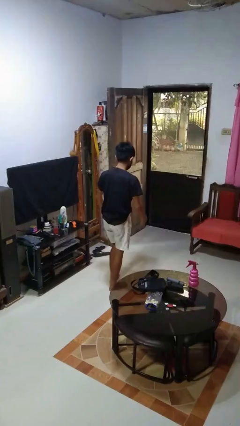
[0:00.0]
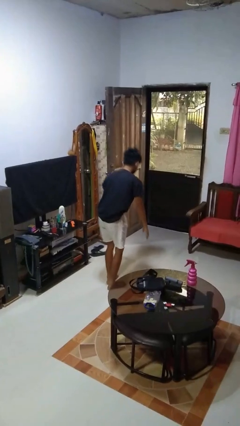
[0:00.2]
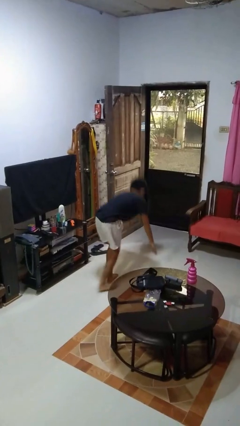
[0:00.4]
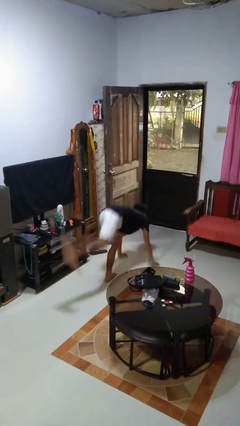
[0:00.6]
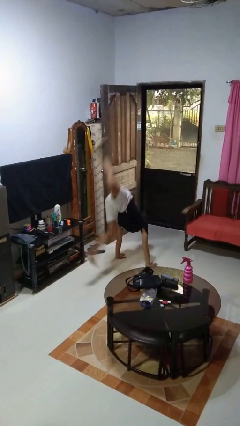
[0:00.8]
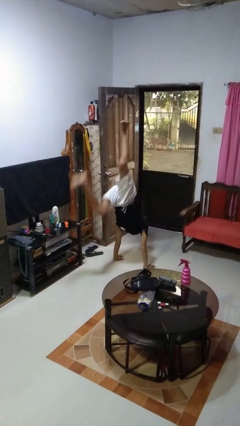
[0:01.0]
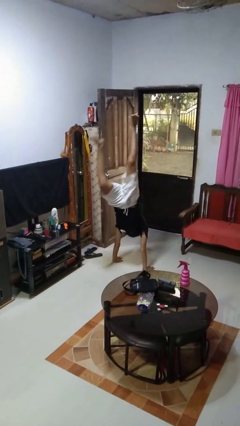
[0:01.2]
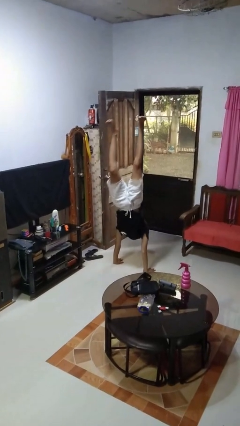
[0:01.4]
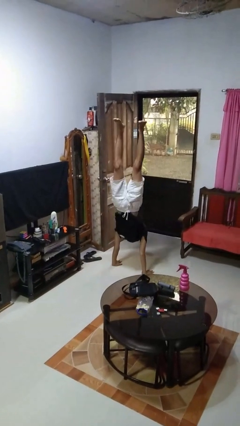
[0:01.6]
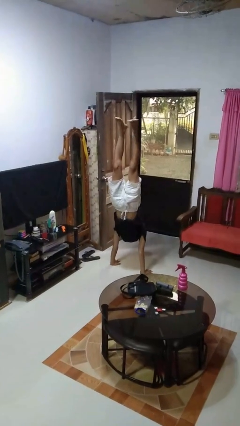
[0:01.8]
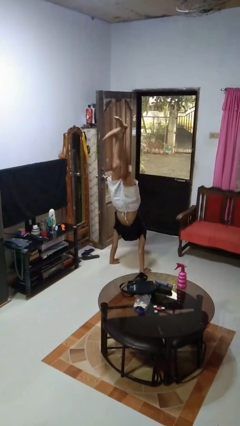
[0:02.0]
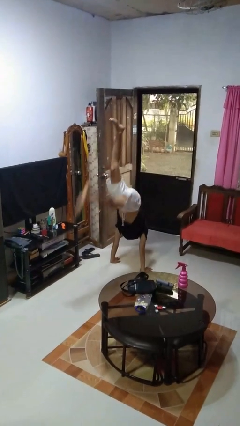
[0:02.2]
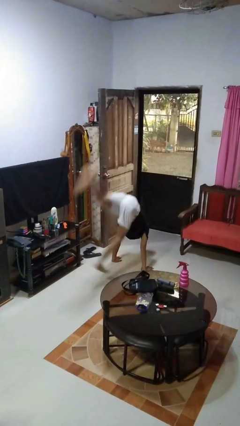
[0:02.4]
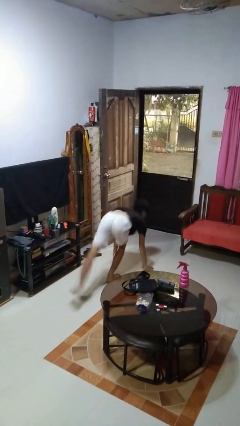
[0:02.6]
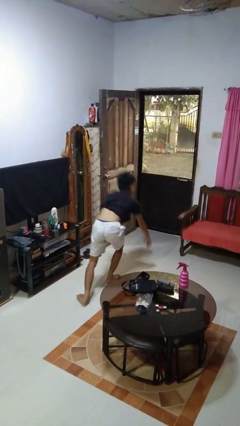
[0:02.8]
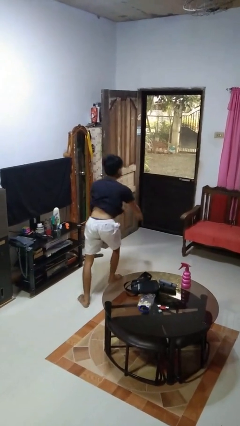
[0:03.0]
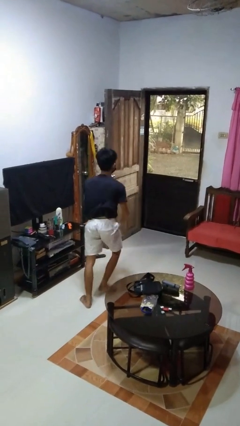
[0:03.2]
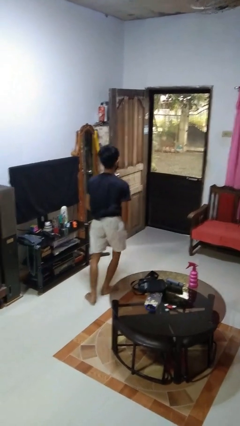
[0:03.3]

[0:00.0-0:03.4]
person handstand

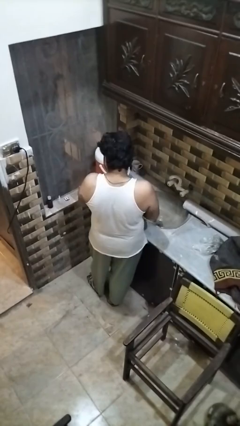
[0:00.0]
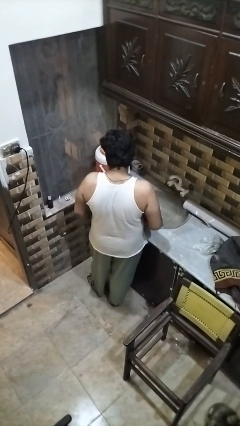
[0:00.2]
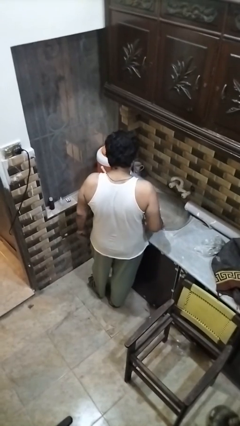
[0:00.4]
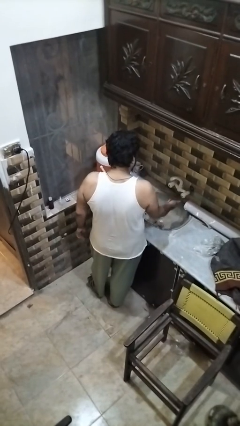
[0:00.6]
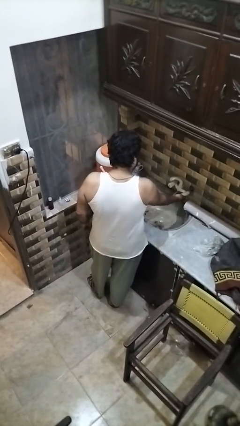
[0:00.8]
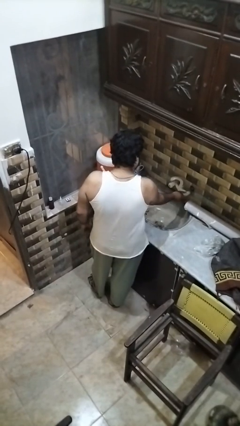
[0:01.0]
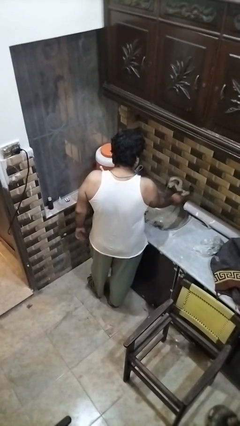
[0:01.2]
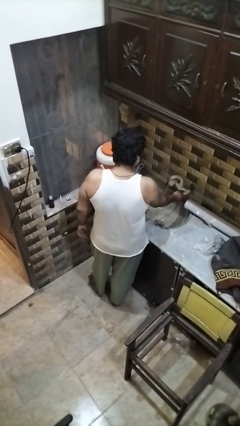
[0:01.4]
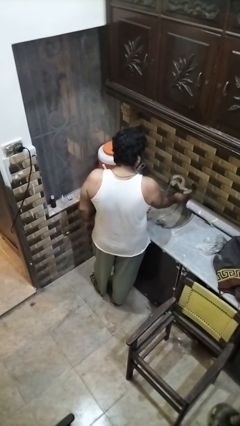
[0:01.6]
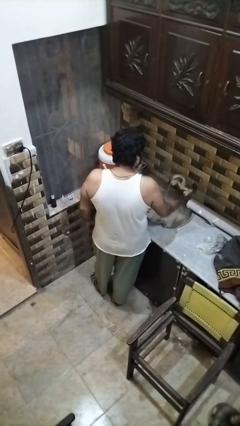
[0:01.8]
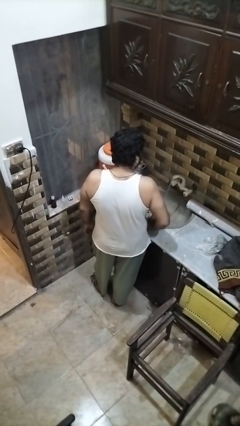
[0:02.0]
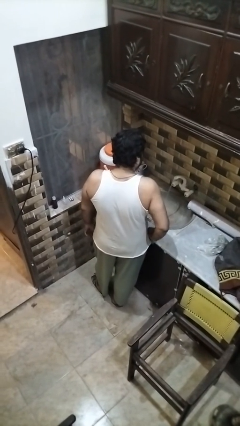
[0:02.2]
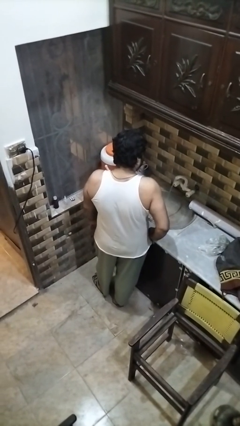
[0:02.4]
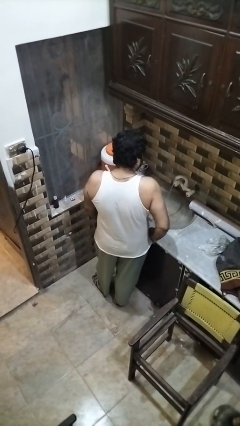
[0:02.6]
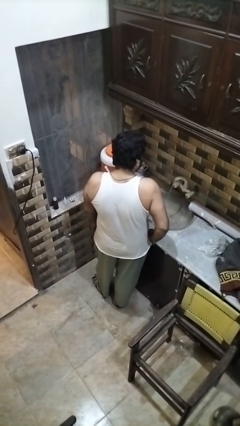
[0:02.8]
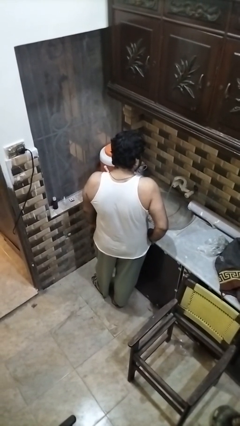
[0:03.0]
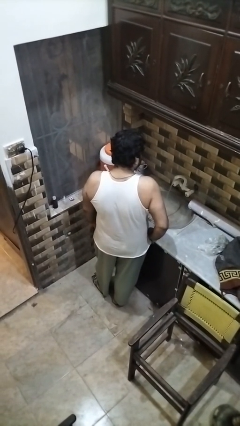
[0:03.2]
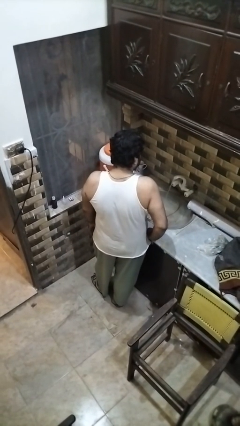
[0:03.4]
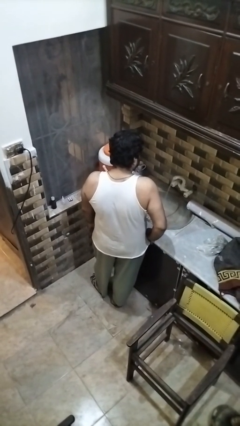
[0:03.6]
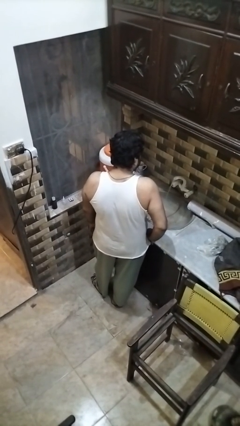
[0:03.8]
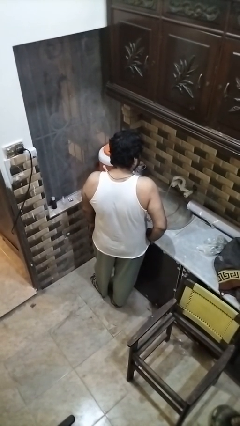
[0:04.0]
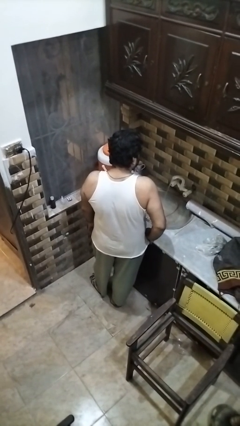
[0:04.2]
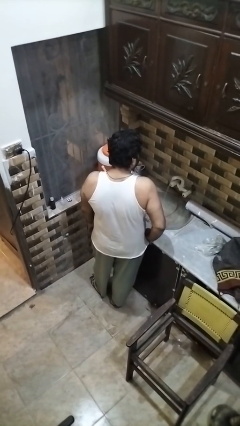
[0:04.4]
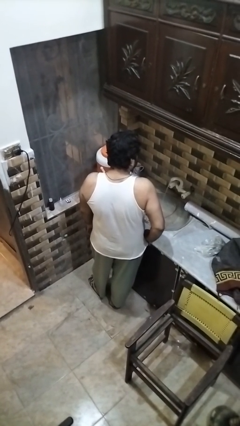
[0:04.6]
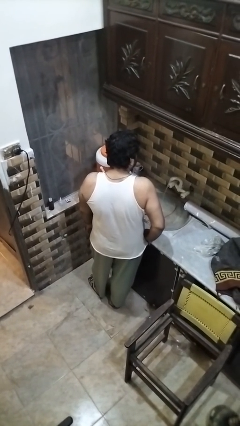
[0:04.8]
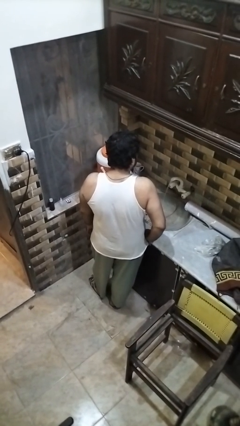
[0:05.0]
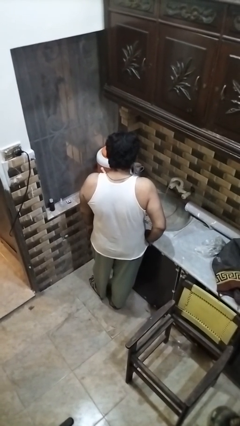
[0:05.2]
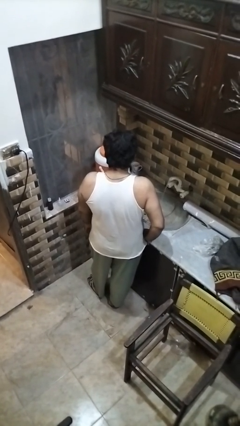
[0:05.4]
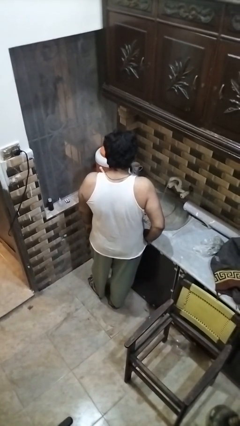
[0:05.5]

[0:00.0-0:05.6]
person turns on faucet

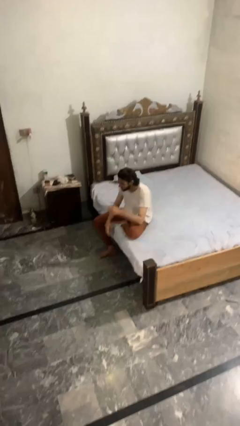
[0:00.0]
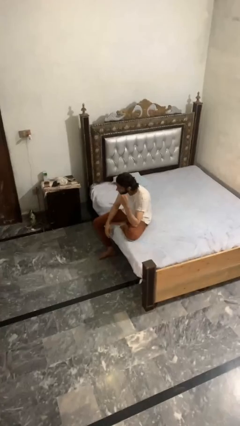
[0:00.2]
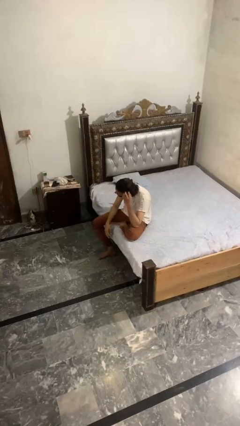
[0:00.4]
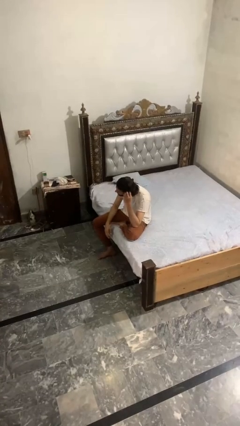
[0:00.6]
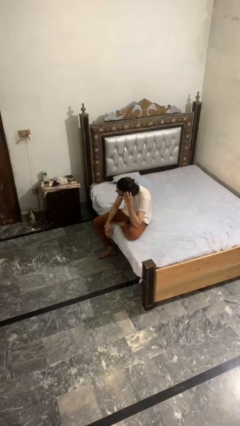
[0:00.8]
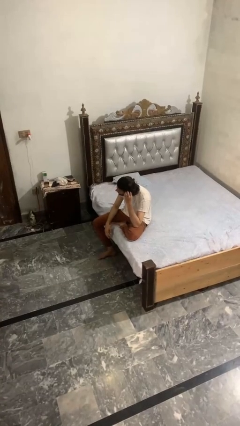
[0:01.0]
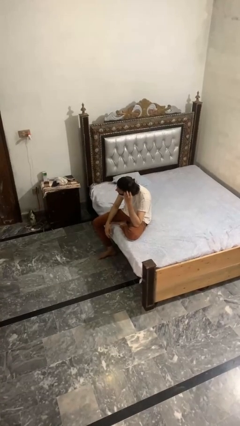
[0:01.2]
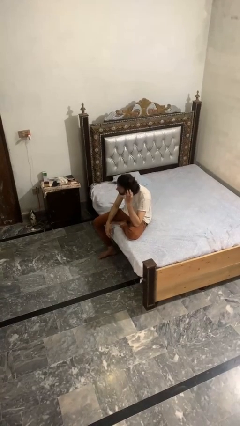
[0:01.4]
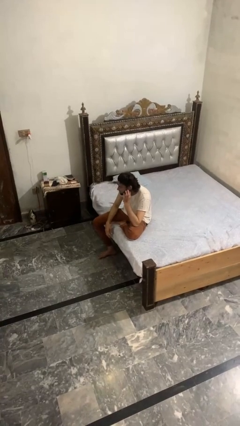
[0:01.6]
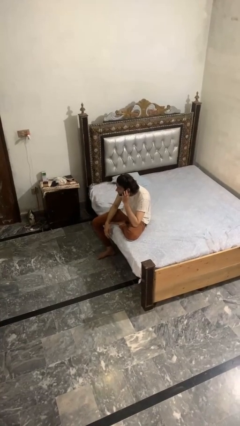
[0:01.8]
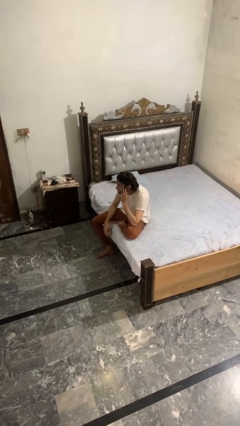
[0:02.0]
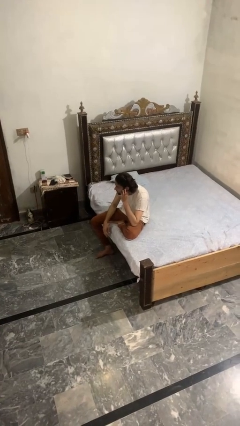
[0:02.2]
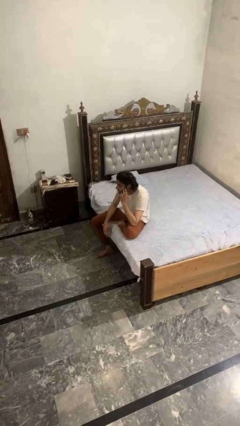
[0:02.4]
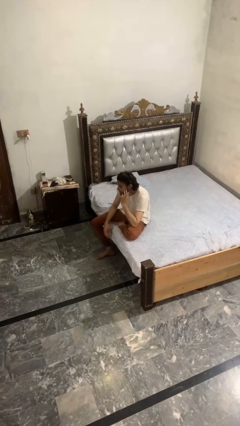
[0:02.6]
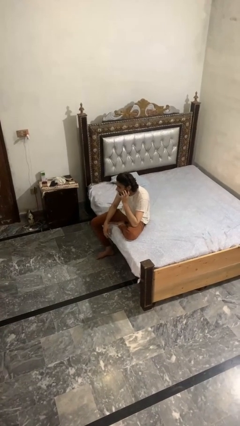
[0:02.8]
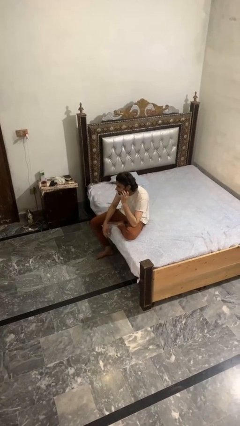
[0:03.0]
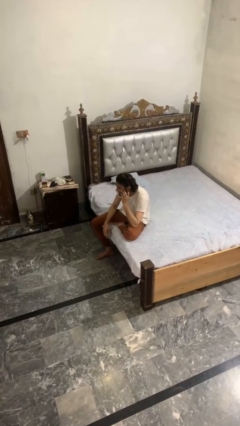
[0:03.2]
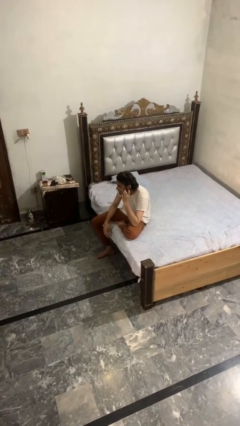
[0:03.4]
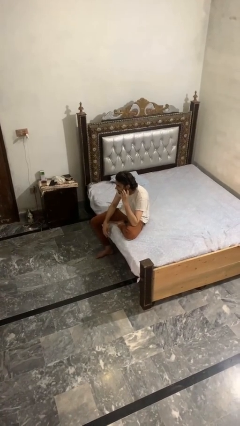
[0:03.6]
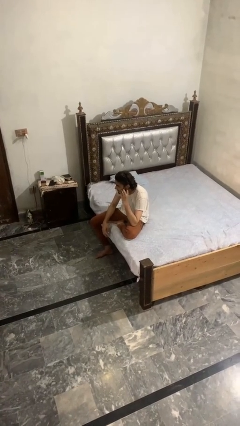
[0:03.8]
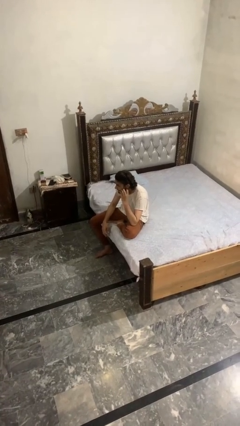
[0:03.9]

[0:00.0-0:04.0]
person scratches face

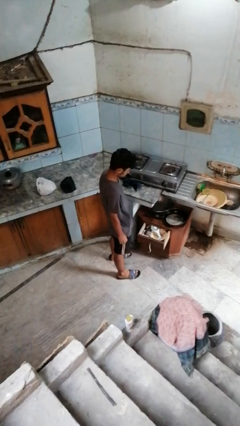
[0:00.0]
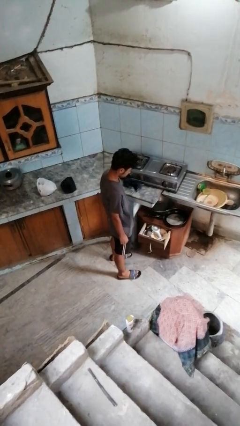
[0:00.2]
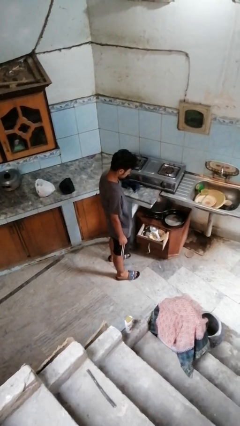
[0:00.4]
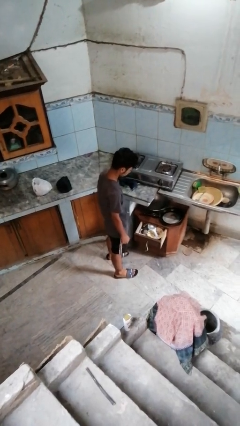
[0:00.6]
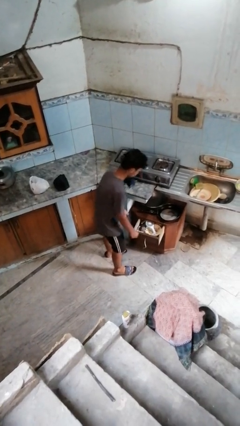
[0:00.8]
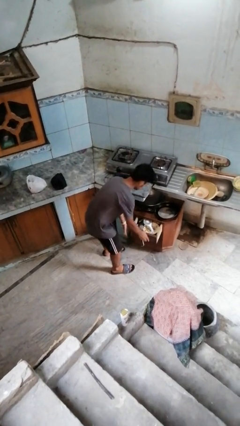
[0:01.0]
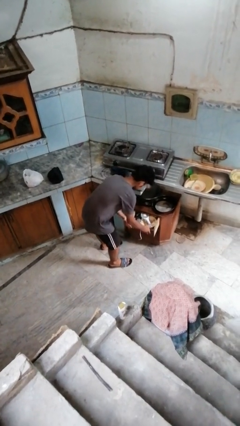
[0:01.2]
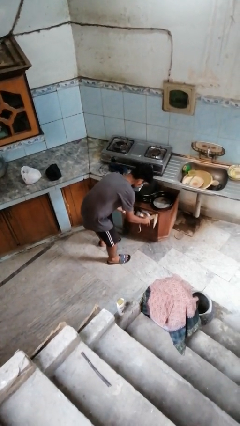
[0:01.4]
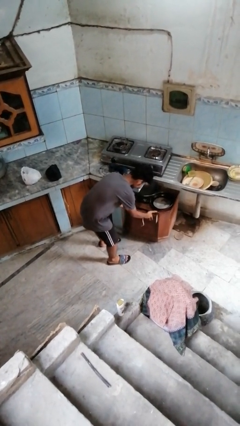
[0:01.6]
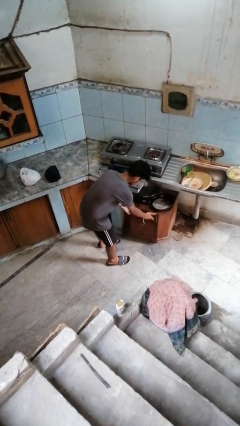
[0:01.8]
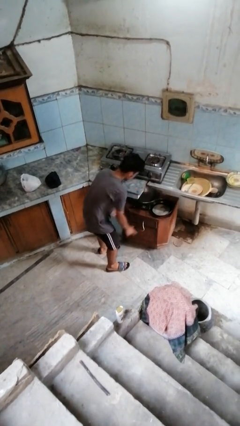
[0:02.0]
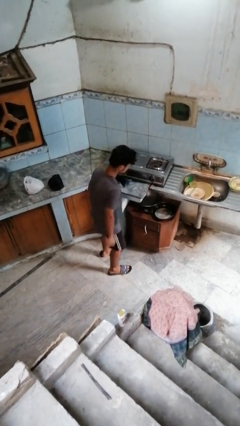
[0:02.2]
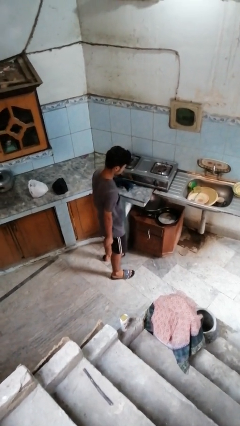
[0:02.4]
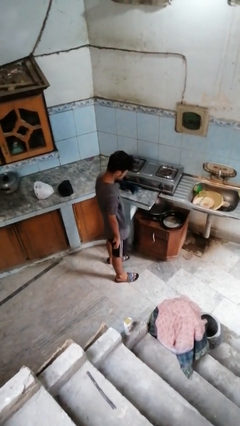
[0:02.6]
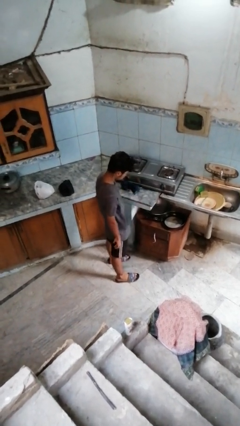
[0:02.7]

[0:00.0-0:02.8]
person closes kitchen drawer

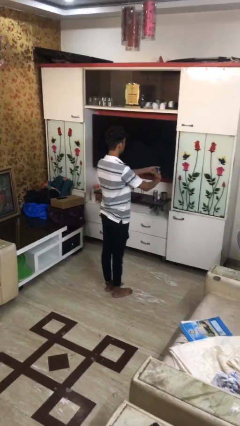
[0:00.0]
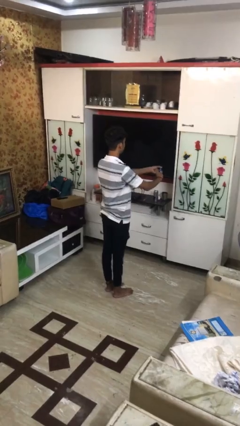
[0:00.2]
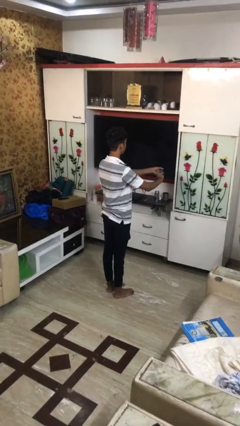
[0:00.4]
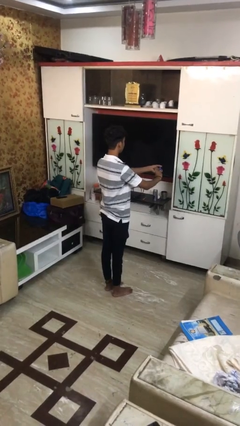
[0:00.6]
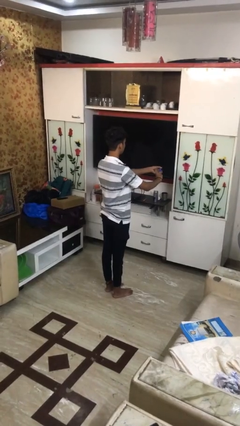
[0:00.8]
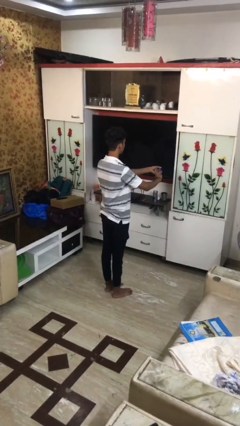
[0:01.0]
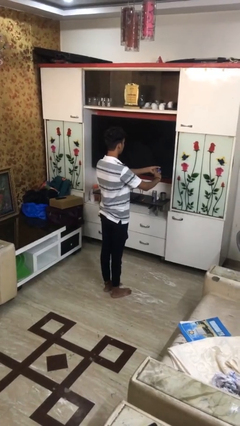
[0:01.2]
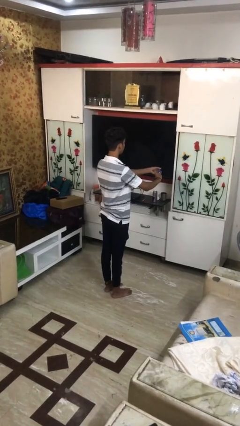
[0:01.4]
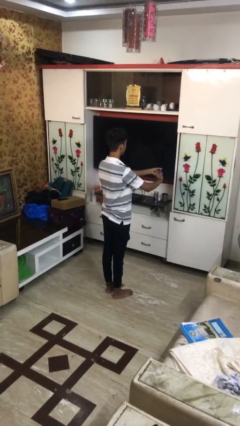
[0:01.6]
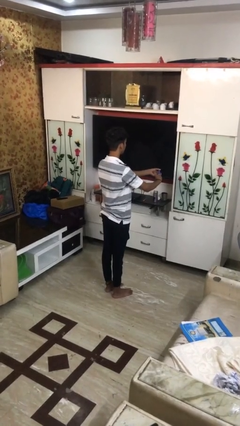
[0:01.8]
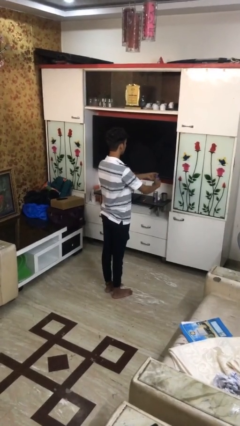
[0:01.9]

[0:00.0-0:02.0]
person clips fingernails

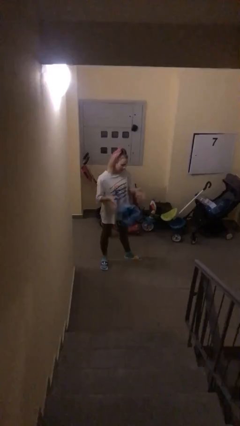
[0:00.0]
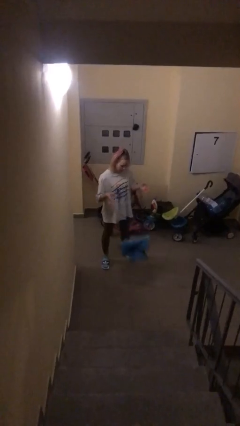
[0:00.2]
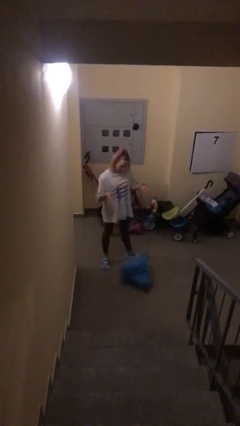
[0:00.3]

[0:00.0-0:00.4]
person drops object
